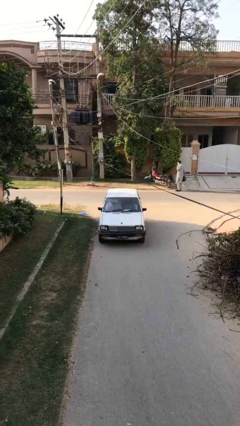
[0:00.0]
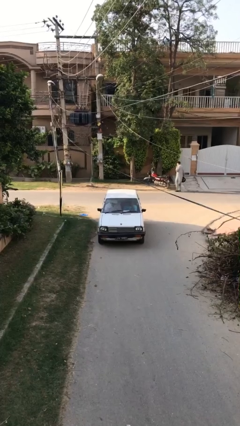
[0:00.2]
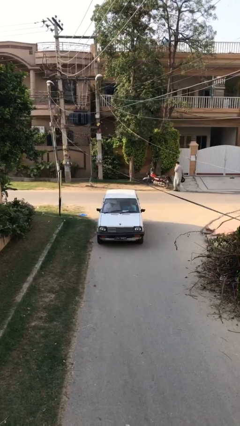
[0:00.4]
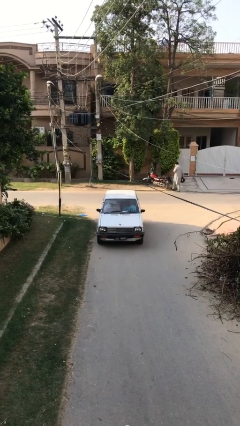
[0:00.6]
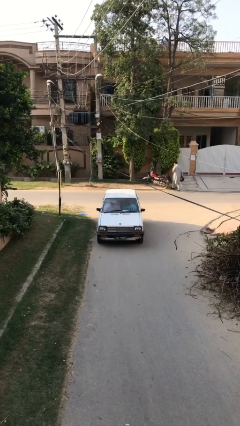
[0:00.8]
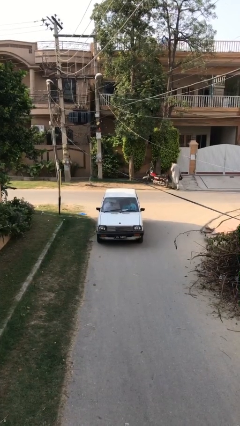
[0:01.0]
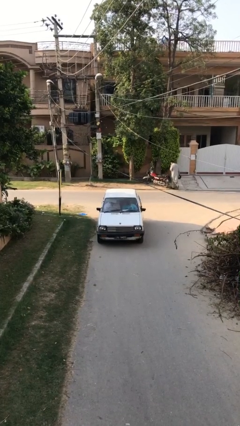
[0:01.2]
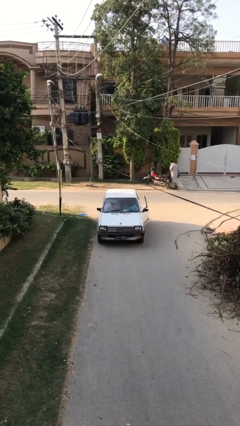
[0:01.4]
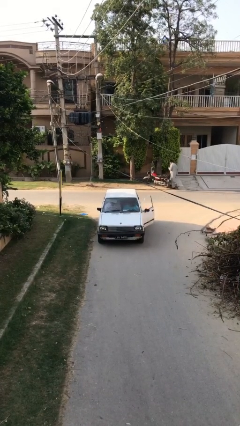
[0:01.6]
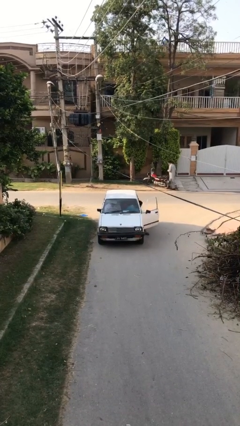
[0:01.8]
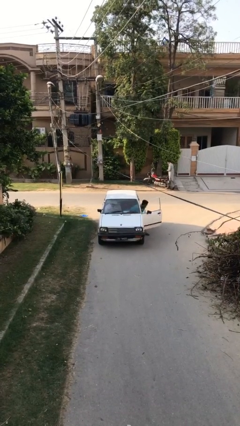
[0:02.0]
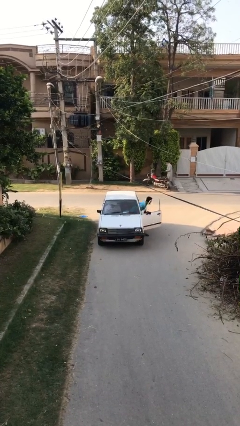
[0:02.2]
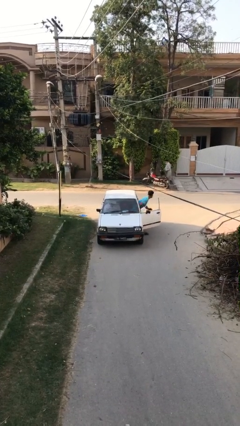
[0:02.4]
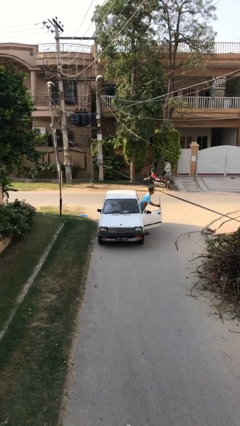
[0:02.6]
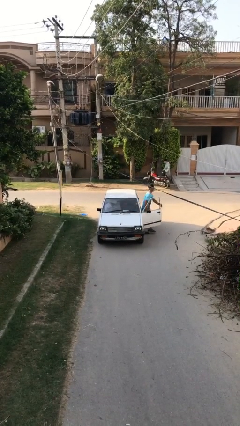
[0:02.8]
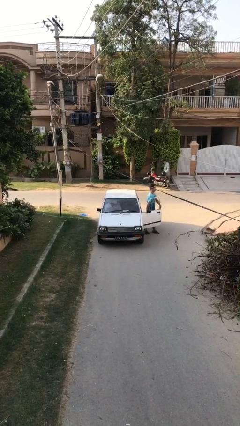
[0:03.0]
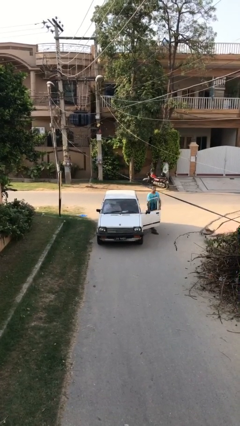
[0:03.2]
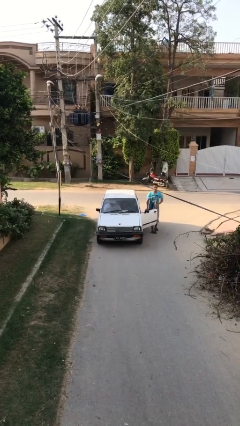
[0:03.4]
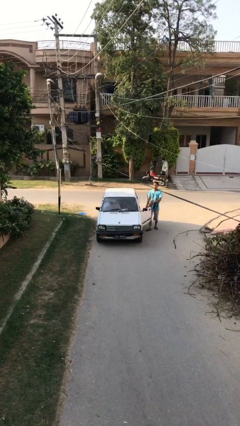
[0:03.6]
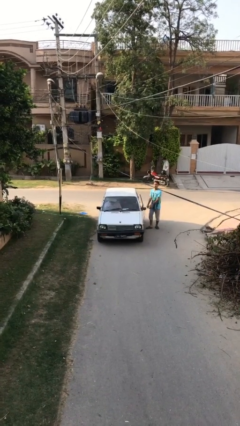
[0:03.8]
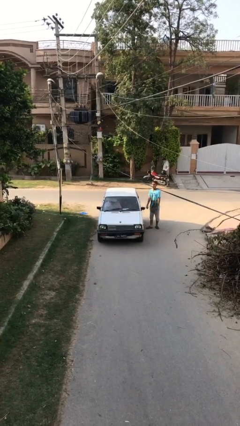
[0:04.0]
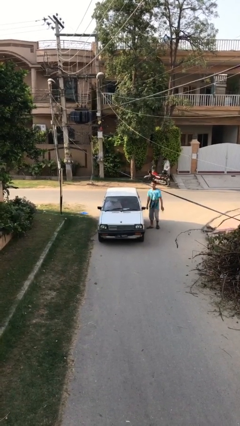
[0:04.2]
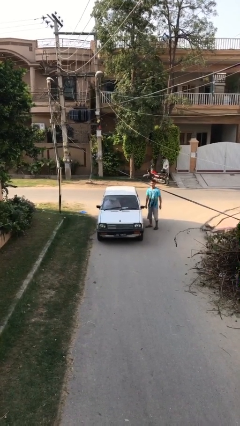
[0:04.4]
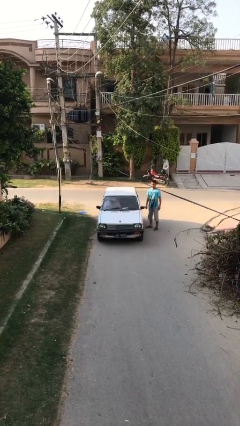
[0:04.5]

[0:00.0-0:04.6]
car drops off person

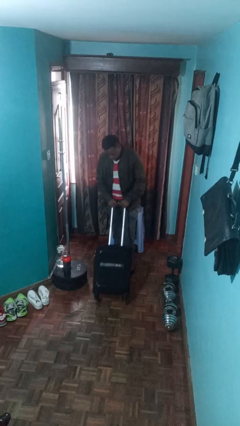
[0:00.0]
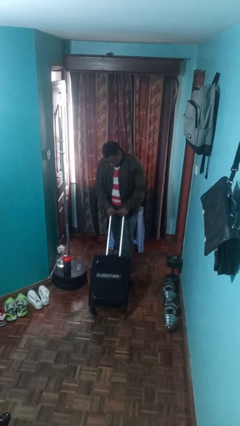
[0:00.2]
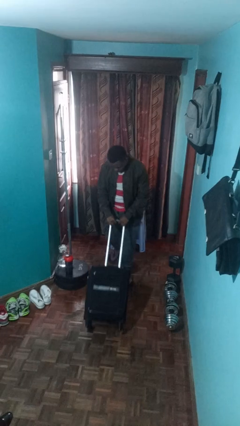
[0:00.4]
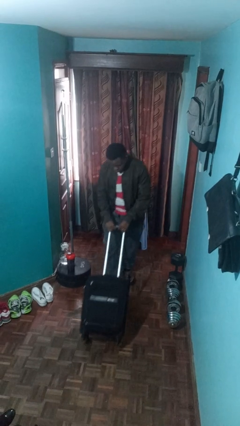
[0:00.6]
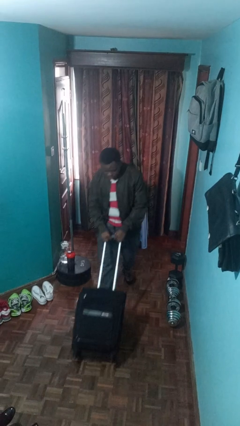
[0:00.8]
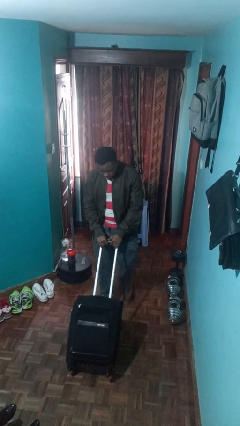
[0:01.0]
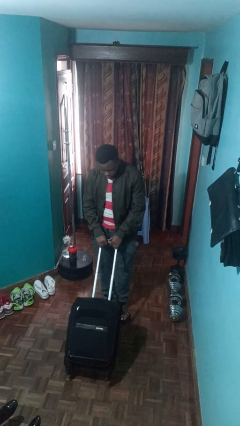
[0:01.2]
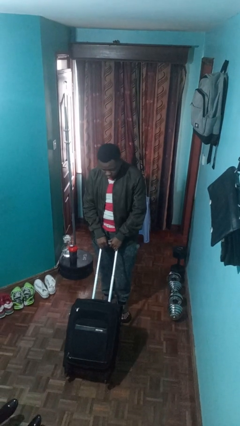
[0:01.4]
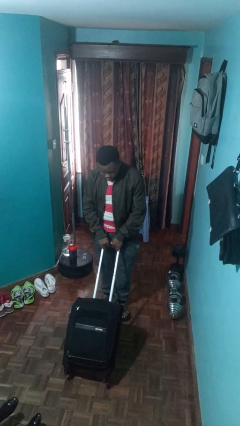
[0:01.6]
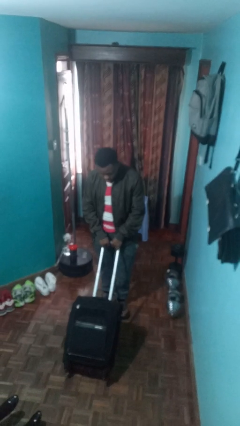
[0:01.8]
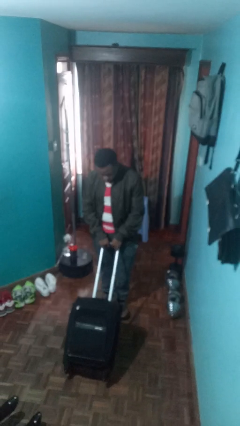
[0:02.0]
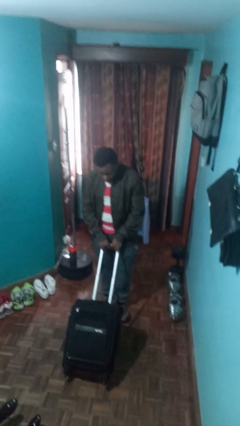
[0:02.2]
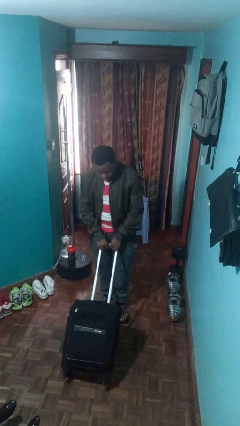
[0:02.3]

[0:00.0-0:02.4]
person pushes wheeled cart

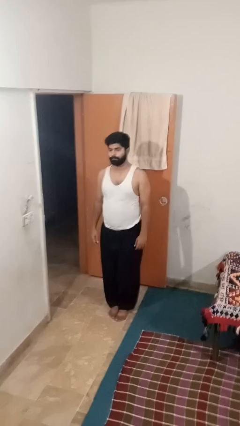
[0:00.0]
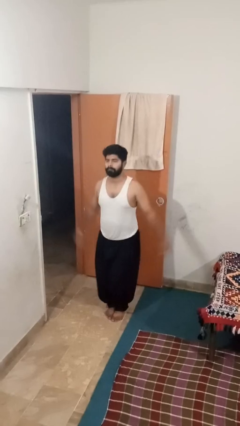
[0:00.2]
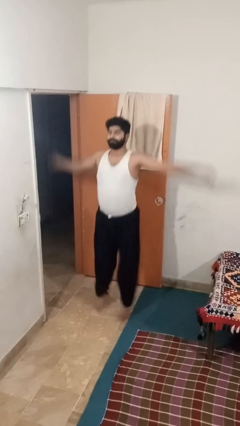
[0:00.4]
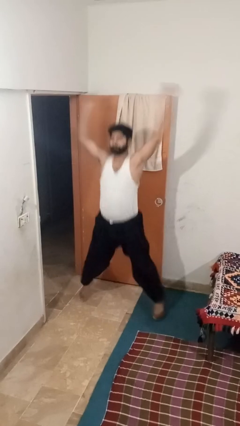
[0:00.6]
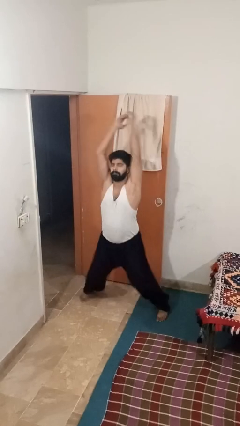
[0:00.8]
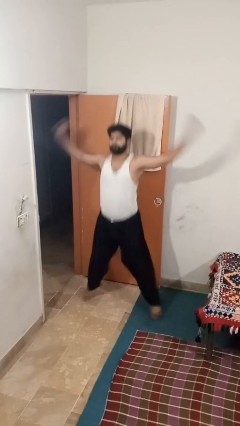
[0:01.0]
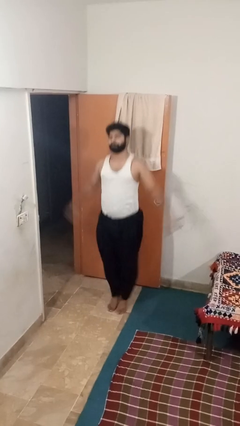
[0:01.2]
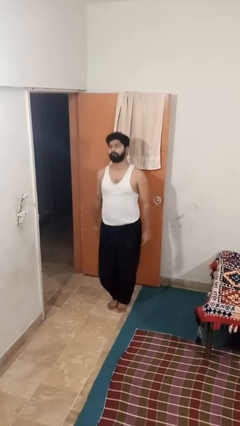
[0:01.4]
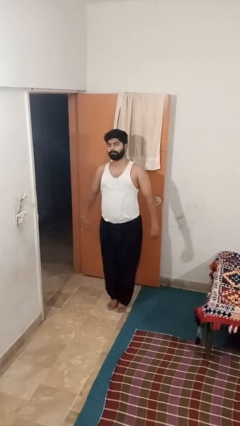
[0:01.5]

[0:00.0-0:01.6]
person exercises with jumping jacks

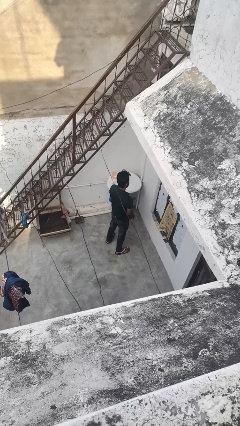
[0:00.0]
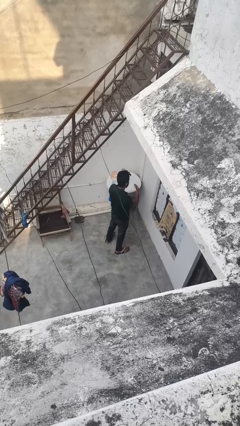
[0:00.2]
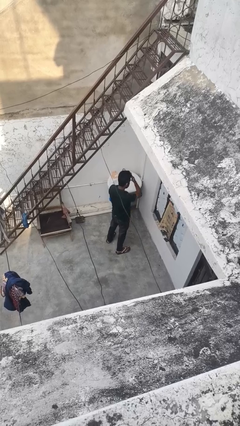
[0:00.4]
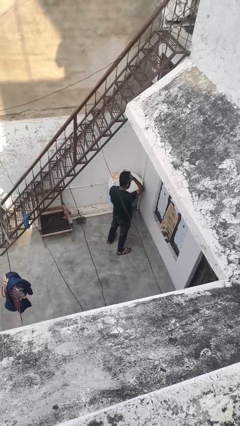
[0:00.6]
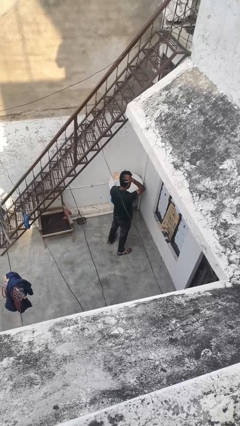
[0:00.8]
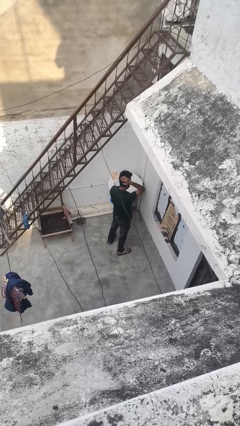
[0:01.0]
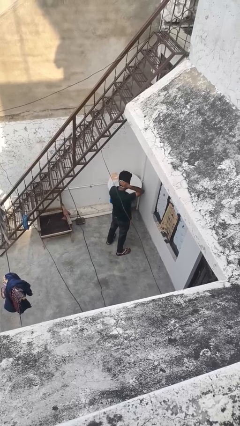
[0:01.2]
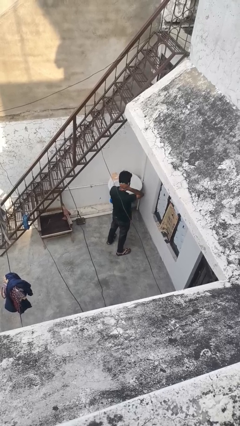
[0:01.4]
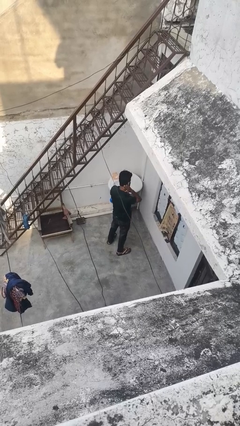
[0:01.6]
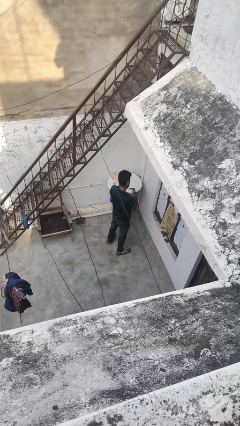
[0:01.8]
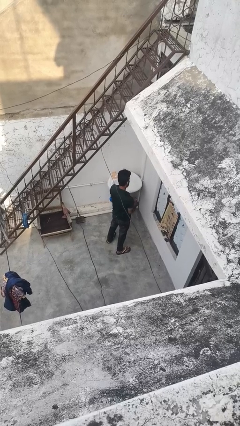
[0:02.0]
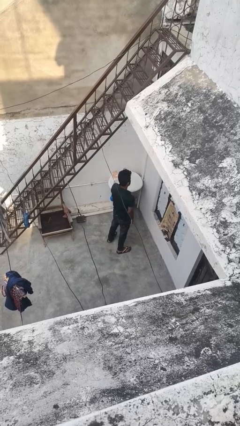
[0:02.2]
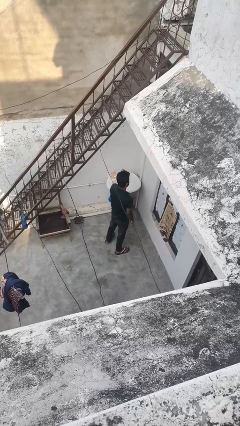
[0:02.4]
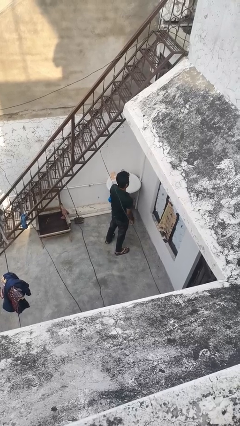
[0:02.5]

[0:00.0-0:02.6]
person strokes hair

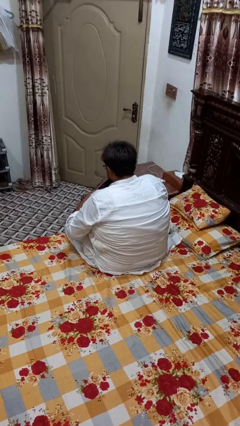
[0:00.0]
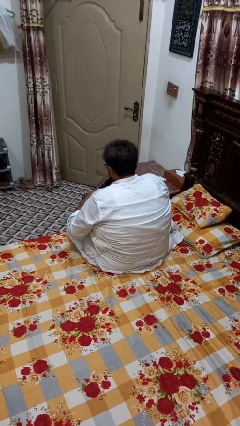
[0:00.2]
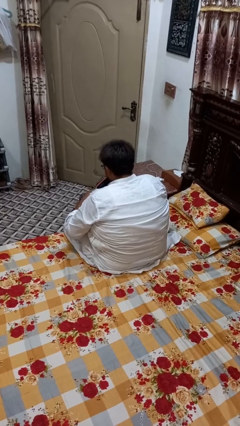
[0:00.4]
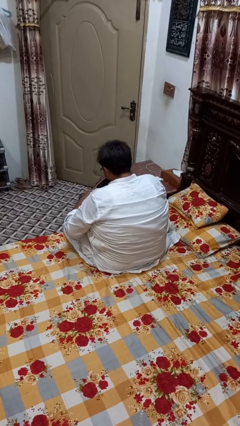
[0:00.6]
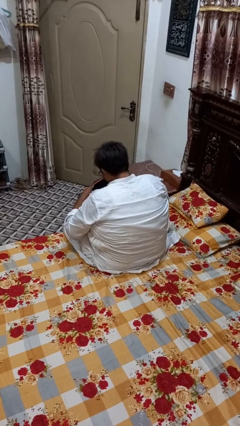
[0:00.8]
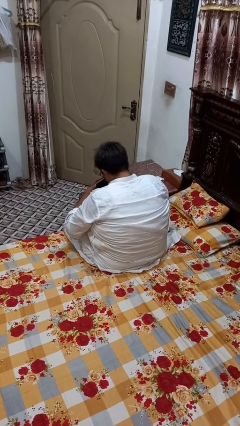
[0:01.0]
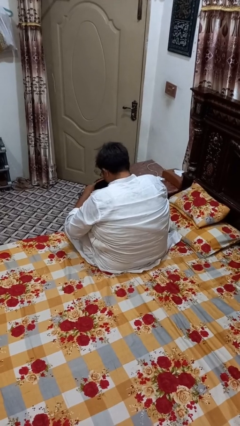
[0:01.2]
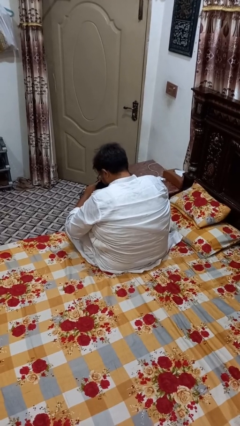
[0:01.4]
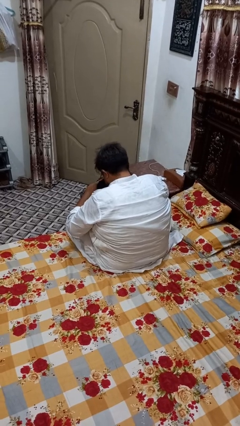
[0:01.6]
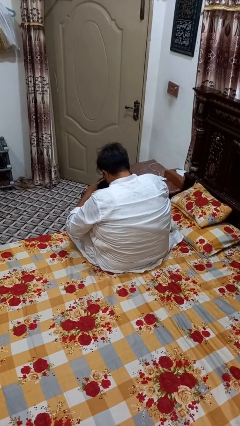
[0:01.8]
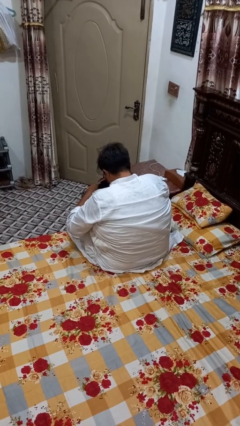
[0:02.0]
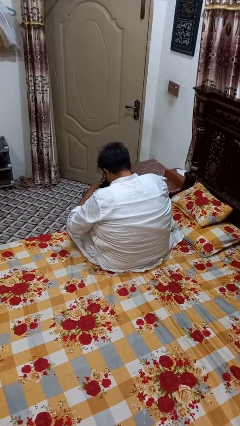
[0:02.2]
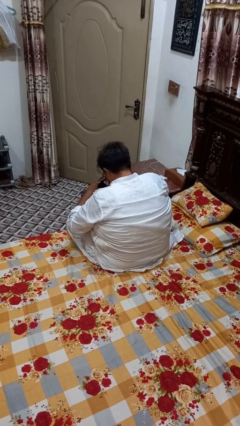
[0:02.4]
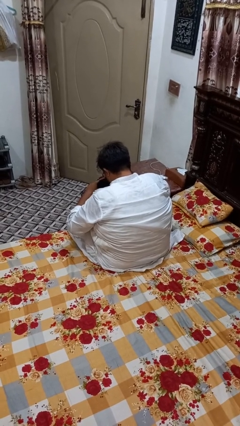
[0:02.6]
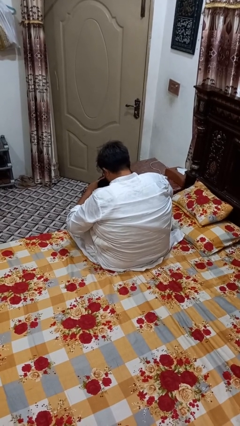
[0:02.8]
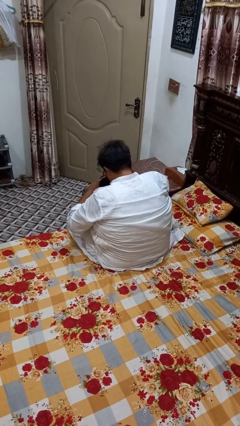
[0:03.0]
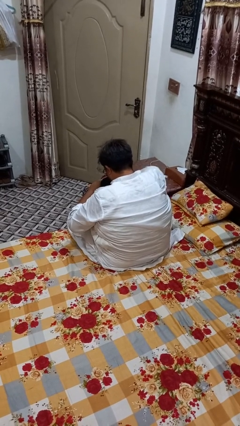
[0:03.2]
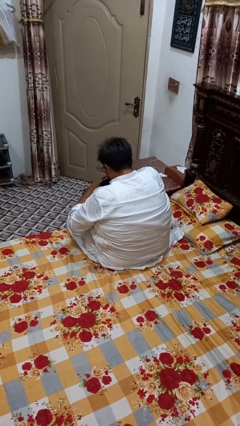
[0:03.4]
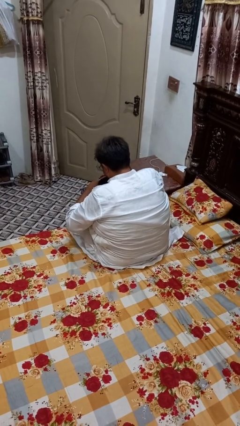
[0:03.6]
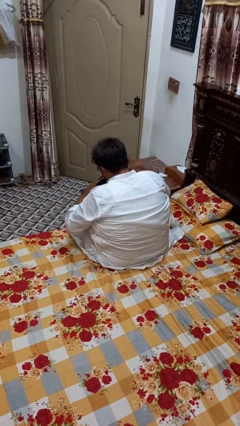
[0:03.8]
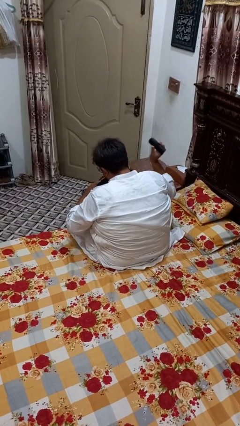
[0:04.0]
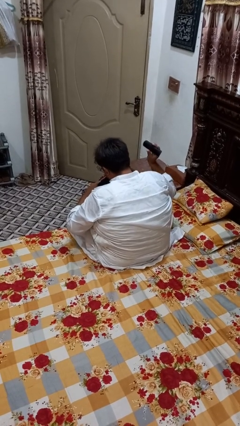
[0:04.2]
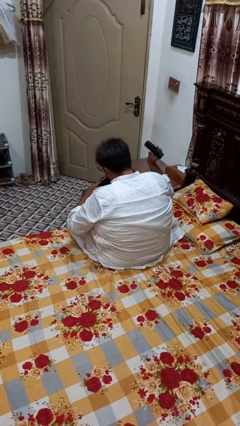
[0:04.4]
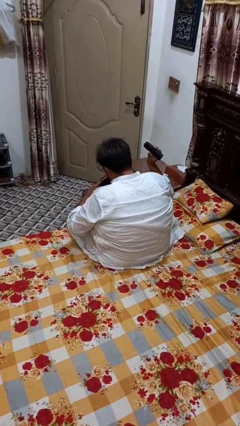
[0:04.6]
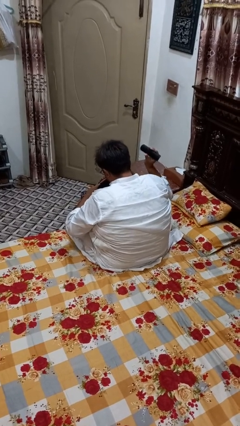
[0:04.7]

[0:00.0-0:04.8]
person takes object from bag

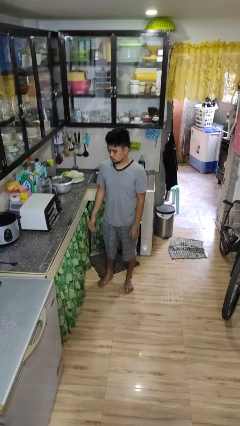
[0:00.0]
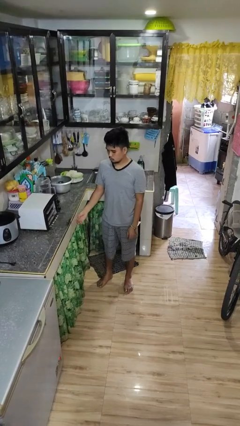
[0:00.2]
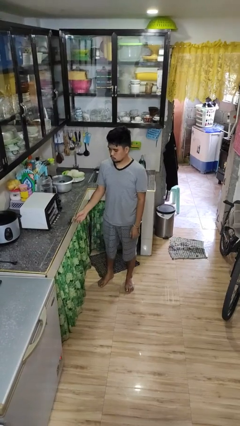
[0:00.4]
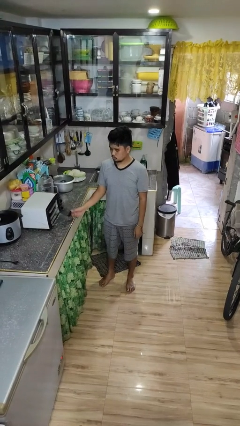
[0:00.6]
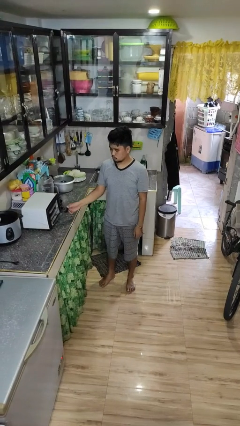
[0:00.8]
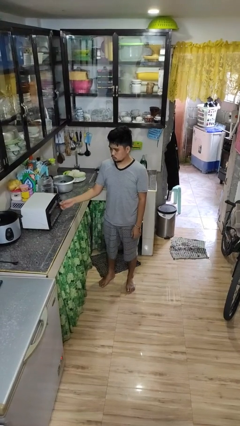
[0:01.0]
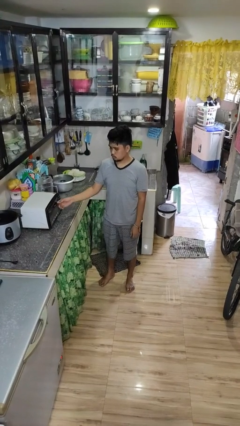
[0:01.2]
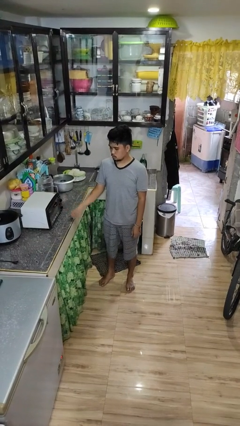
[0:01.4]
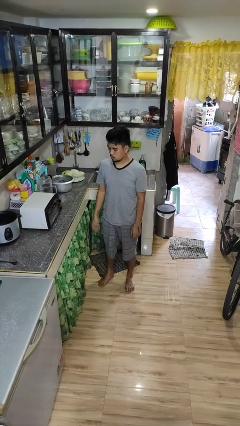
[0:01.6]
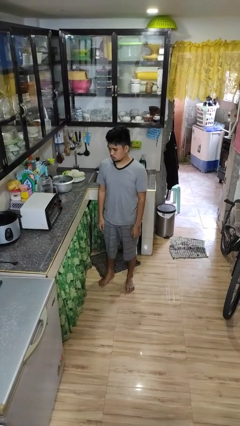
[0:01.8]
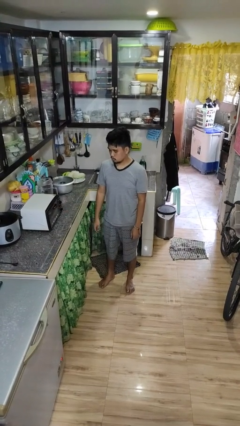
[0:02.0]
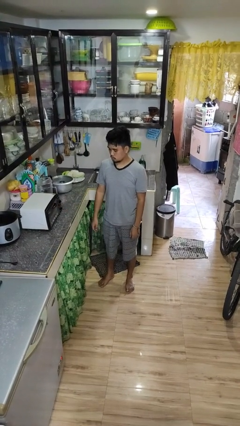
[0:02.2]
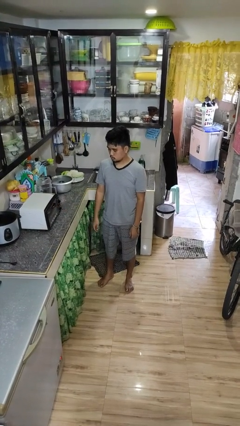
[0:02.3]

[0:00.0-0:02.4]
person closes microwave
